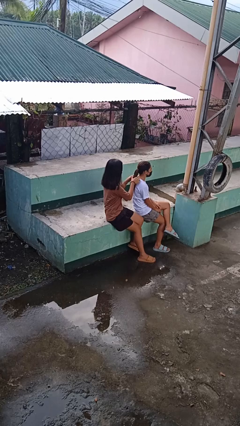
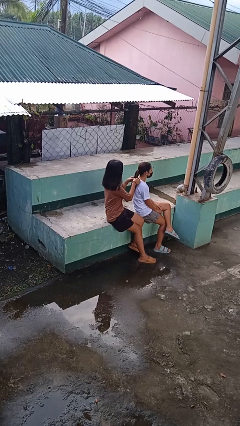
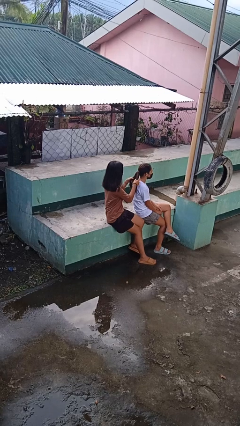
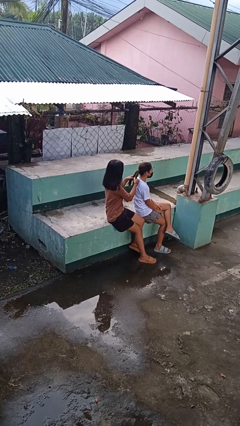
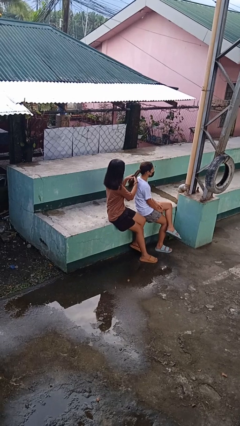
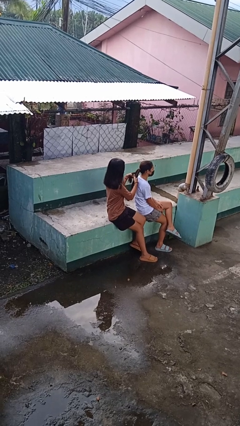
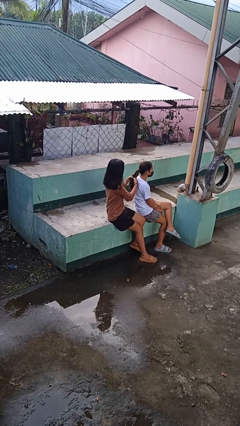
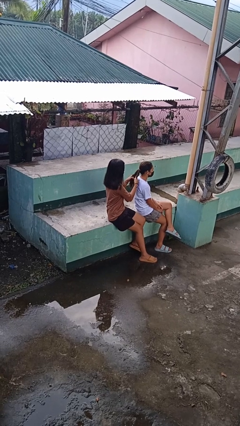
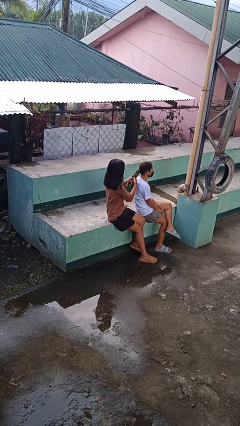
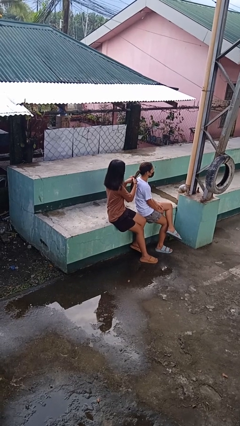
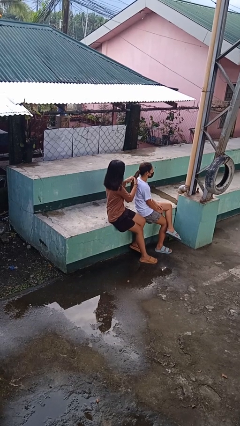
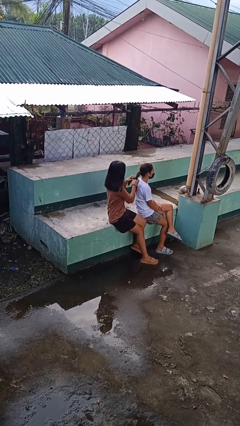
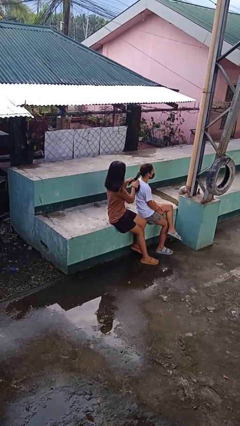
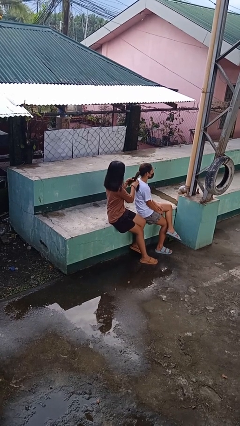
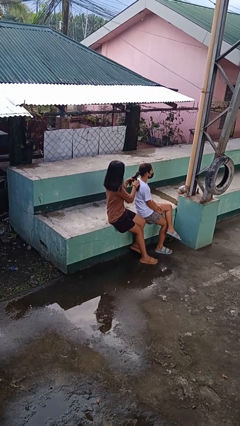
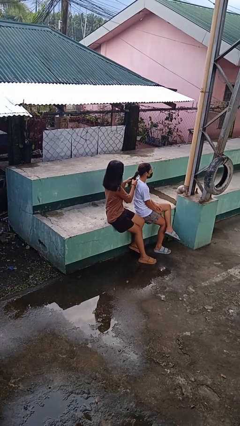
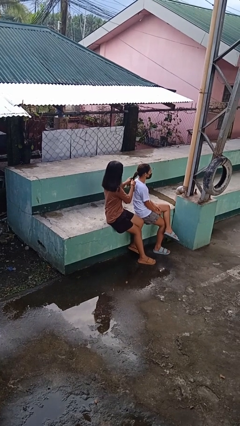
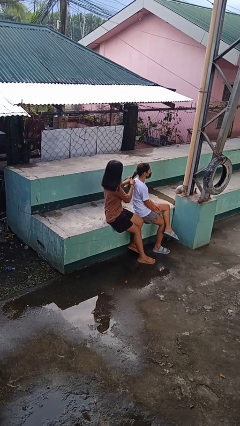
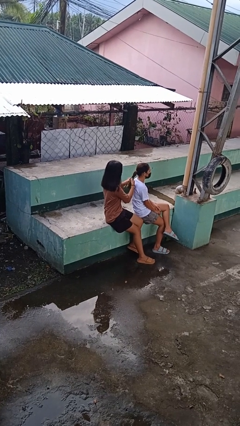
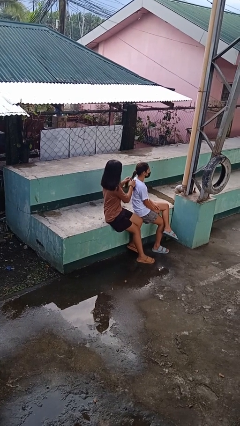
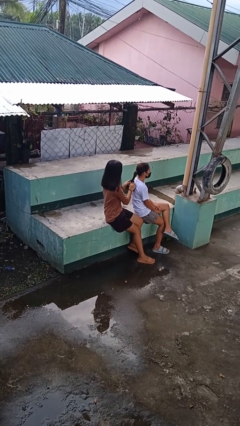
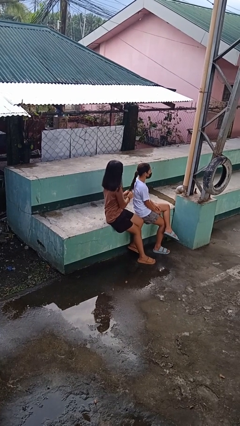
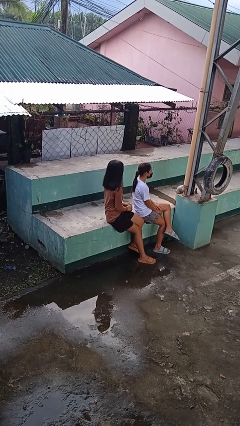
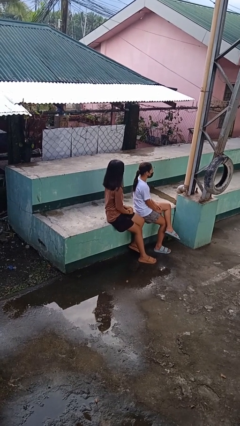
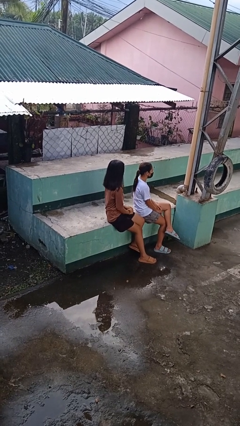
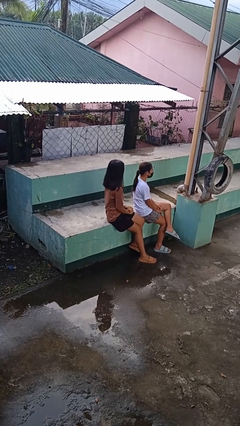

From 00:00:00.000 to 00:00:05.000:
person braids hair of person

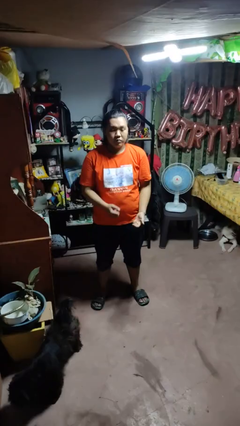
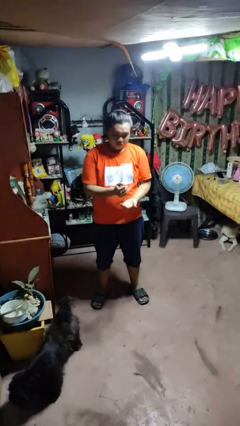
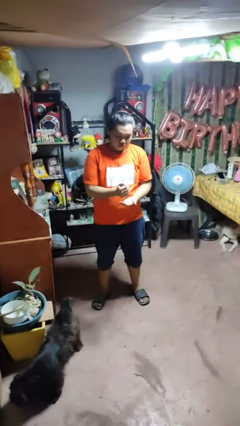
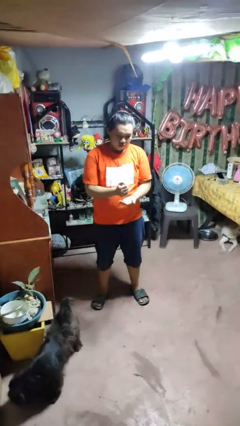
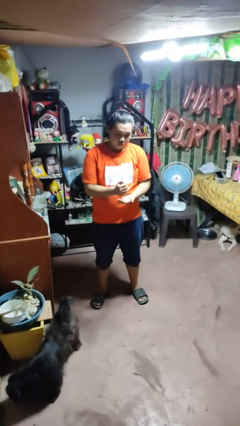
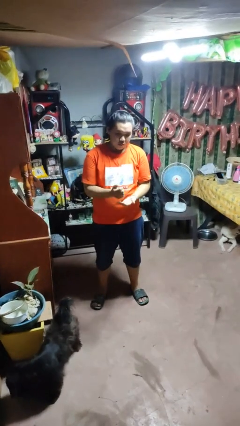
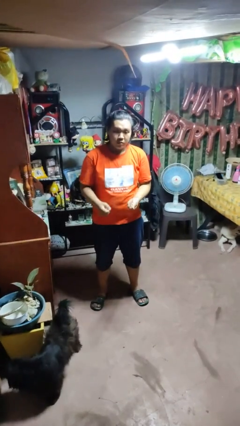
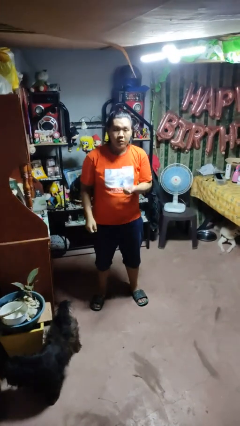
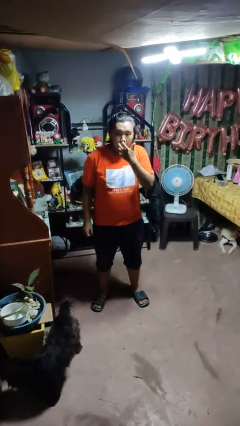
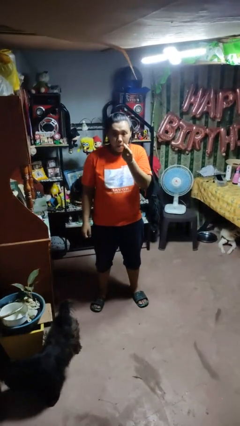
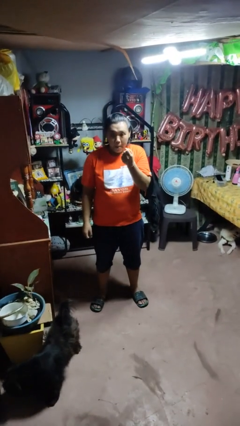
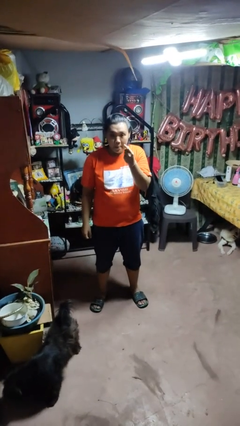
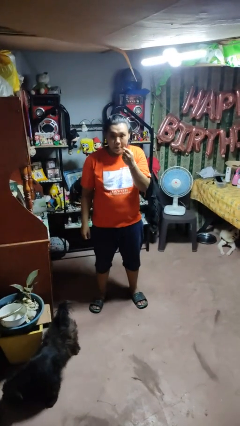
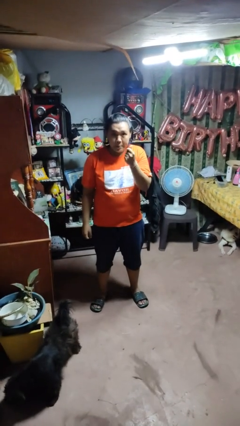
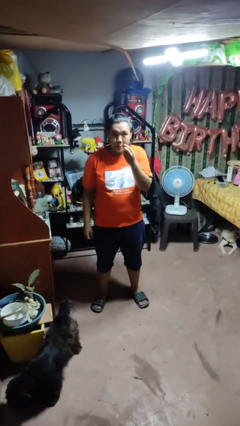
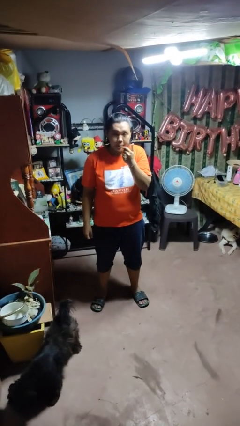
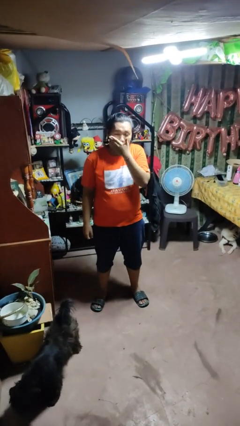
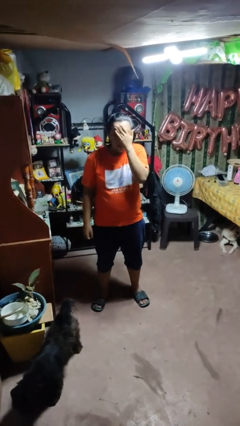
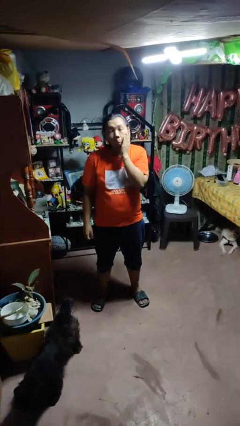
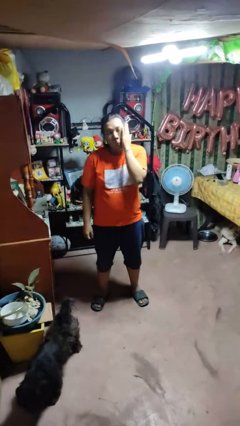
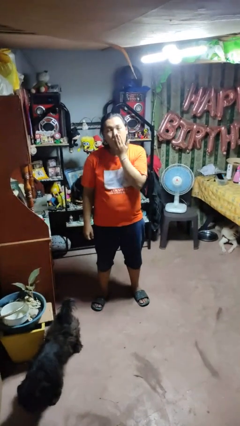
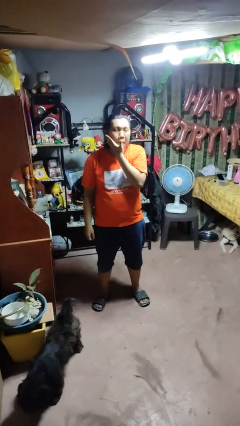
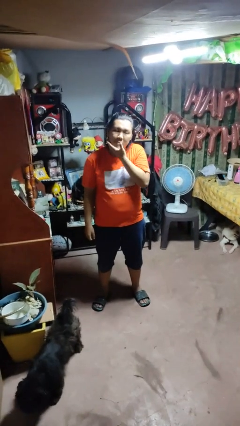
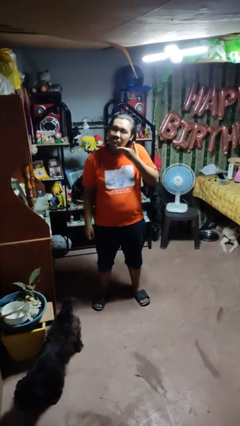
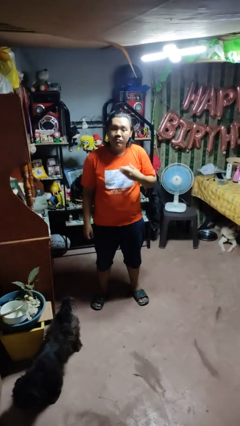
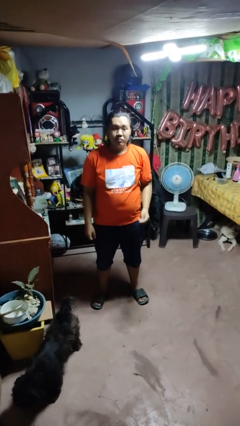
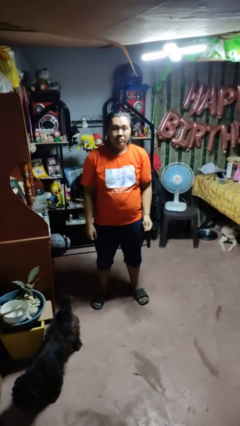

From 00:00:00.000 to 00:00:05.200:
person applies facial moisturizer

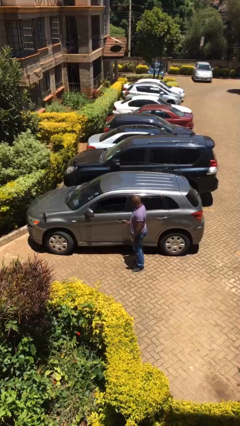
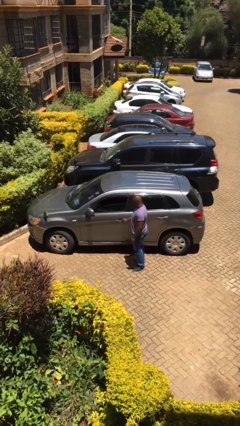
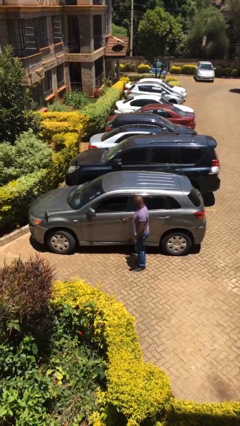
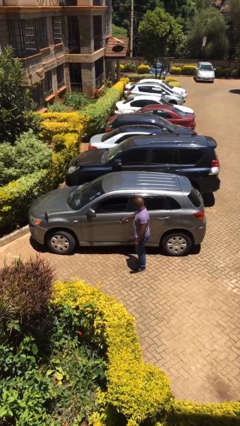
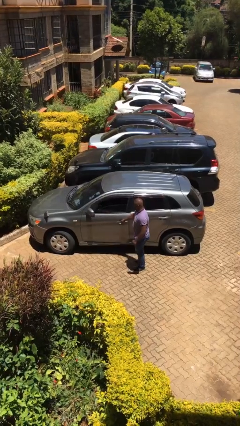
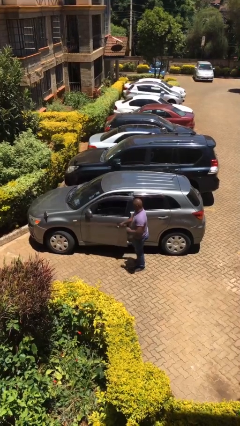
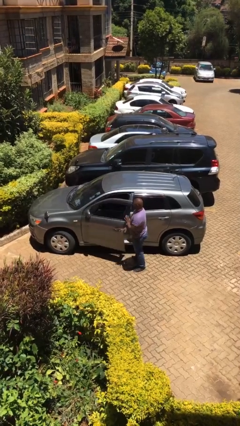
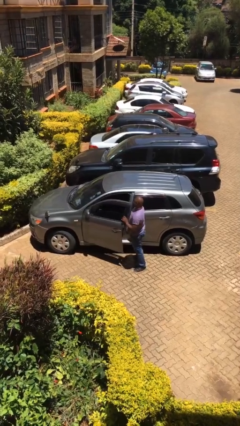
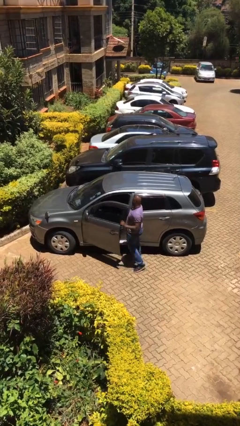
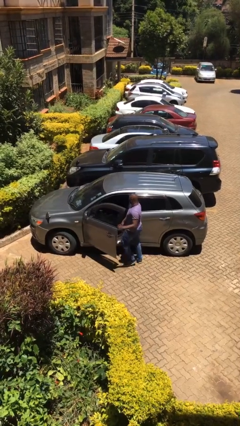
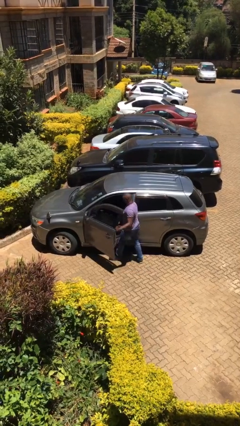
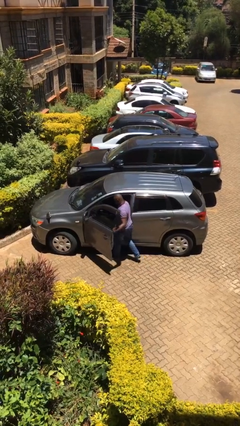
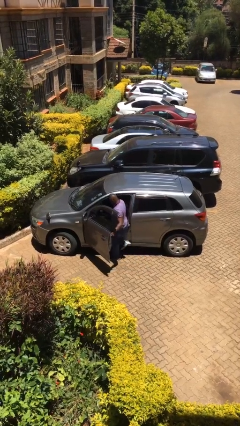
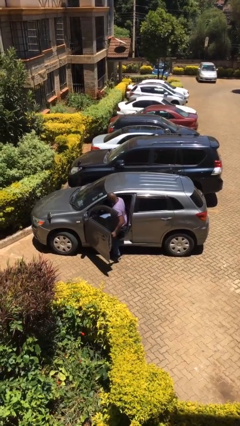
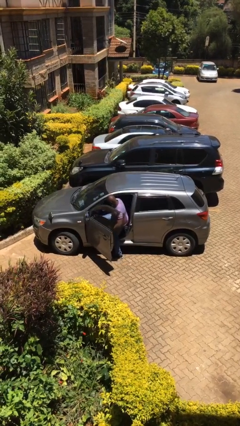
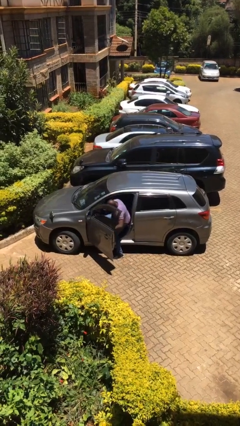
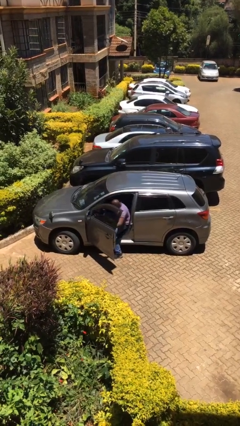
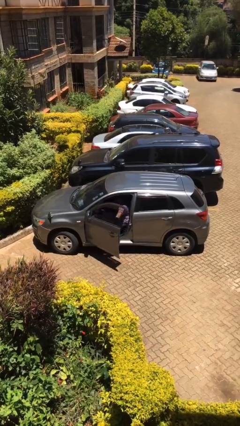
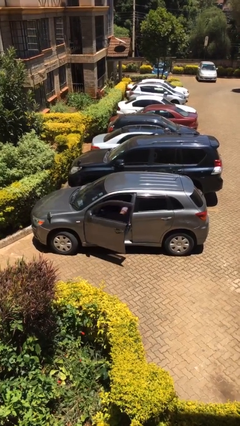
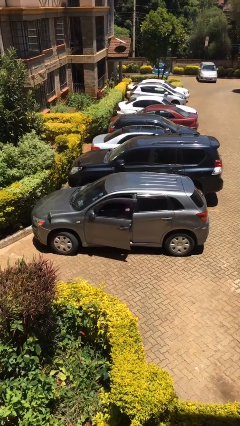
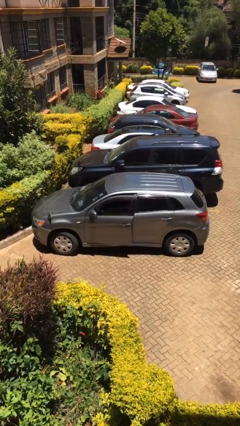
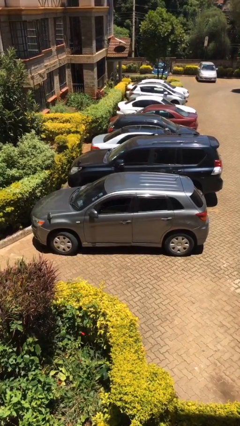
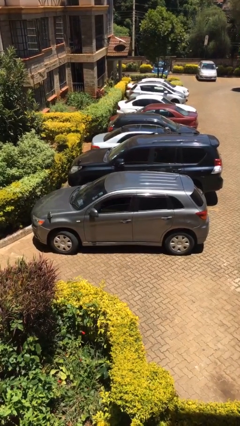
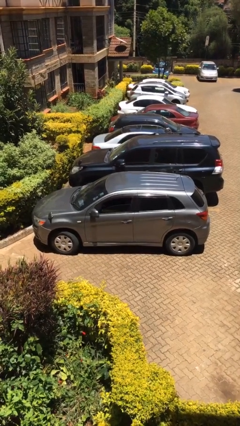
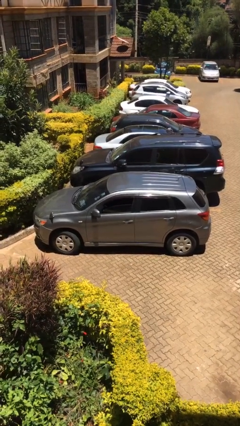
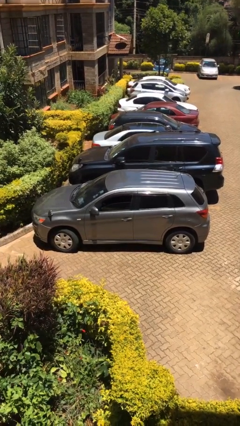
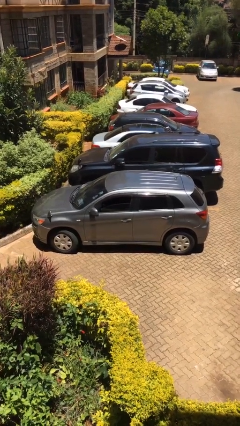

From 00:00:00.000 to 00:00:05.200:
car picks up person

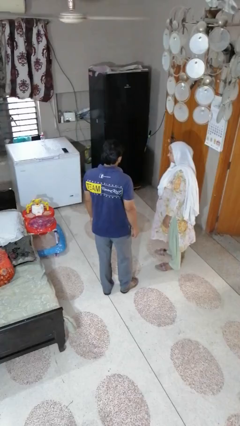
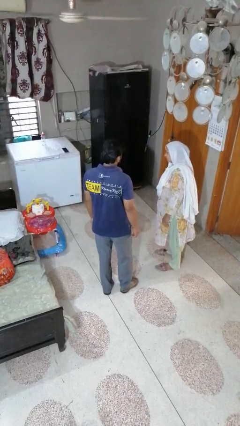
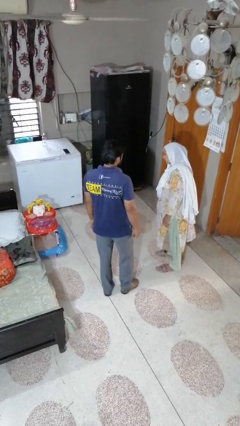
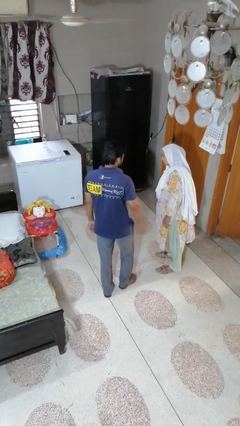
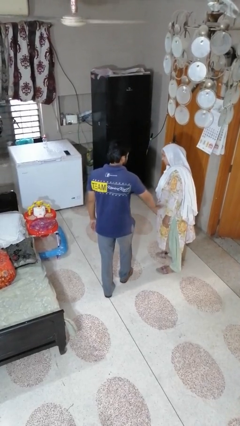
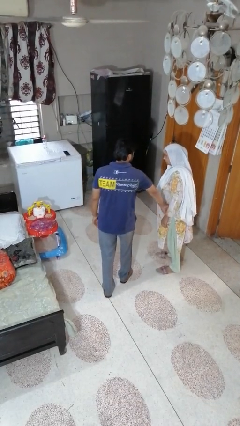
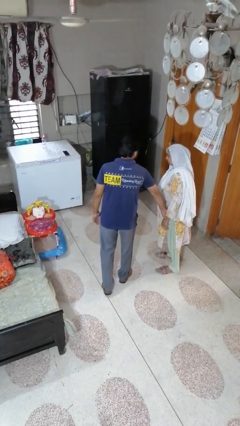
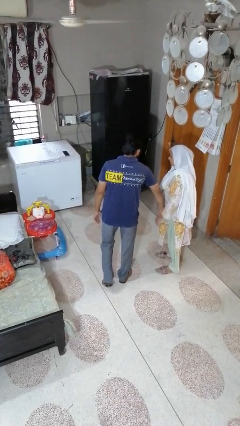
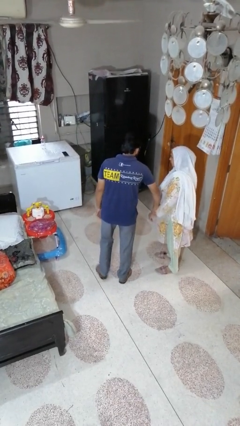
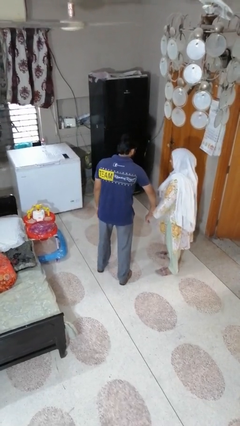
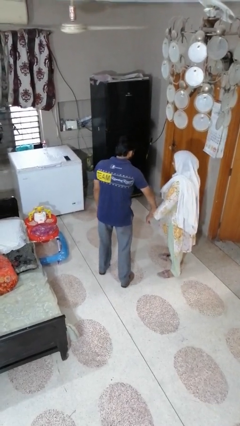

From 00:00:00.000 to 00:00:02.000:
person grabs person by forearm
